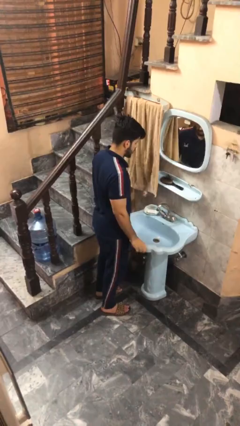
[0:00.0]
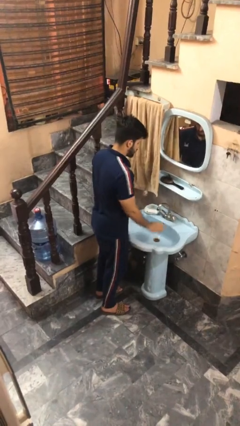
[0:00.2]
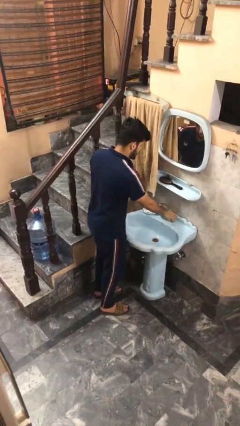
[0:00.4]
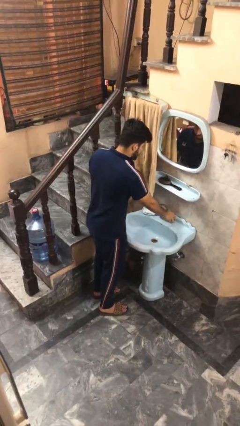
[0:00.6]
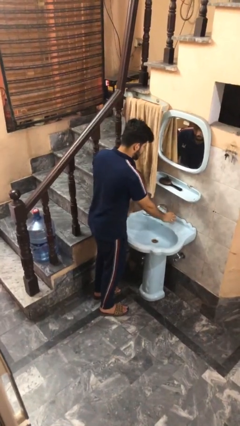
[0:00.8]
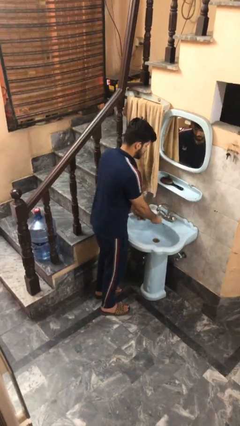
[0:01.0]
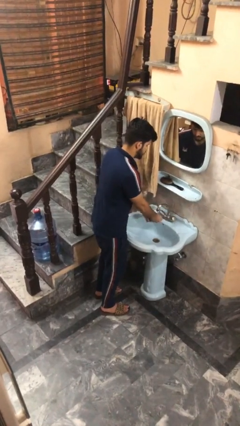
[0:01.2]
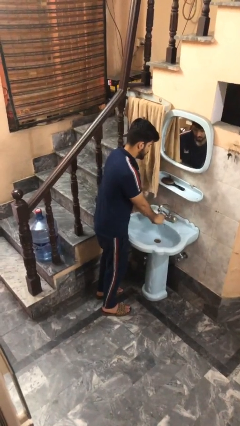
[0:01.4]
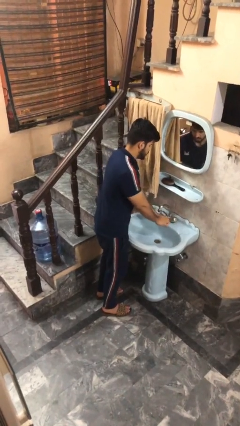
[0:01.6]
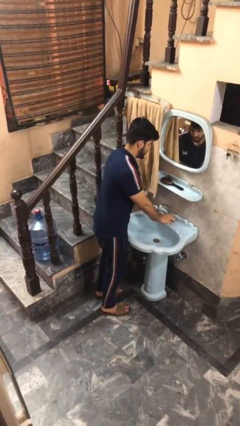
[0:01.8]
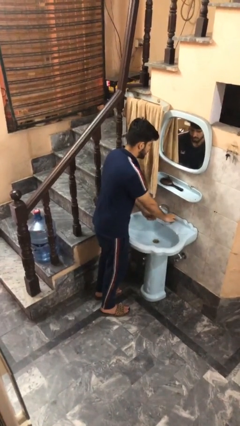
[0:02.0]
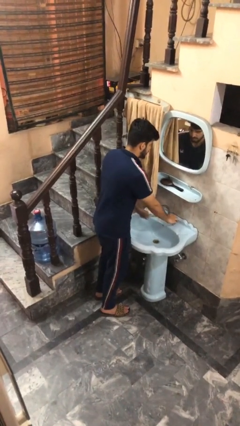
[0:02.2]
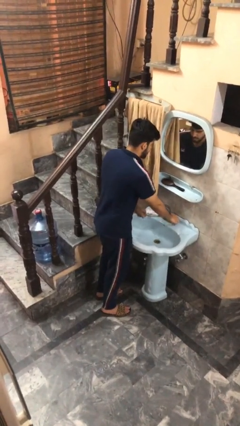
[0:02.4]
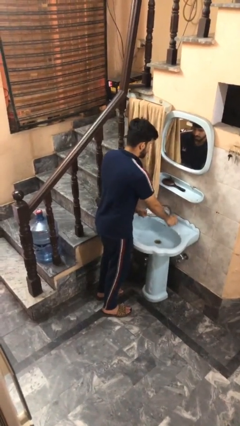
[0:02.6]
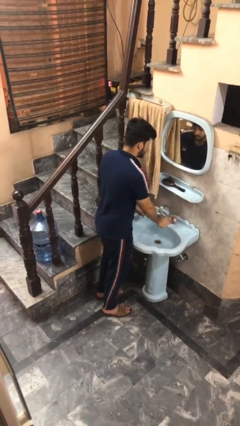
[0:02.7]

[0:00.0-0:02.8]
person washes hands

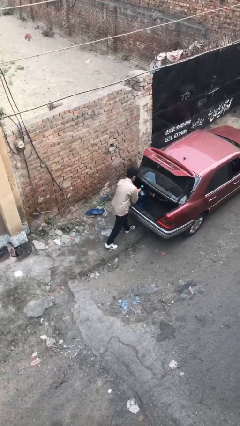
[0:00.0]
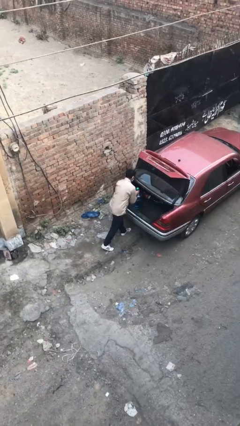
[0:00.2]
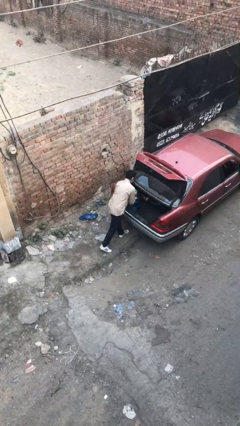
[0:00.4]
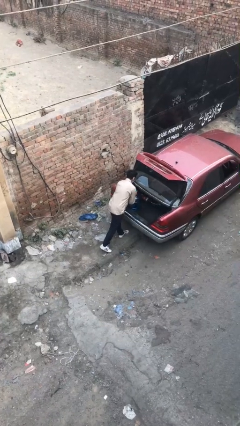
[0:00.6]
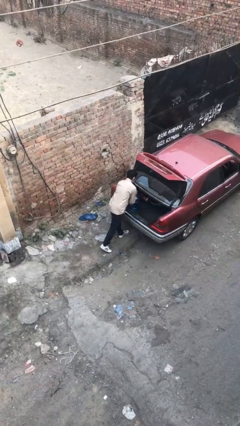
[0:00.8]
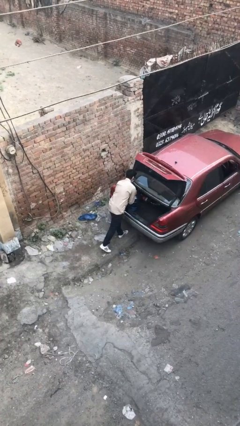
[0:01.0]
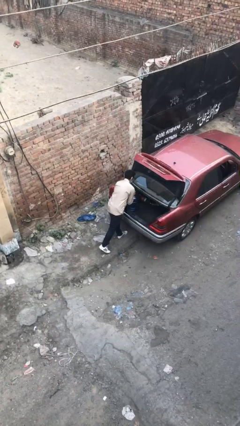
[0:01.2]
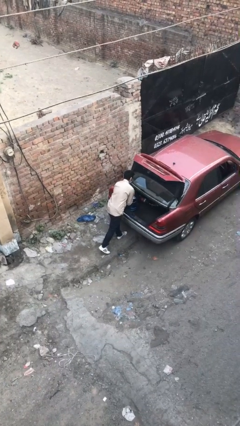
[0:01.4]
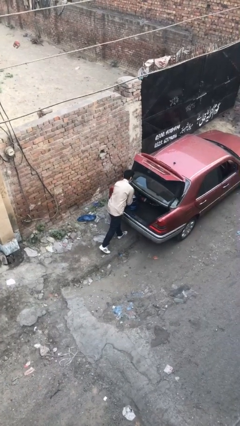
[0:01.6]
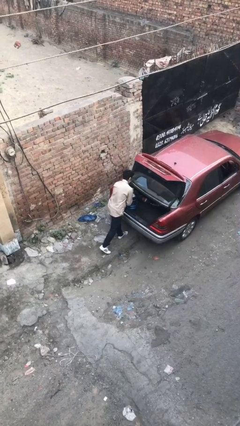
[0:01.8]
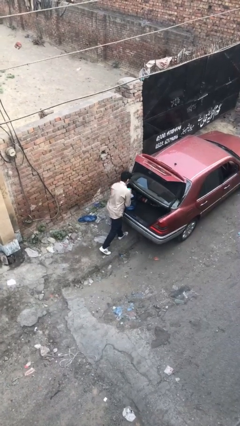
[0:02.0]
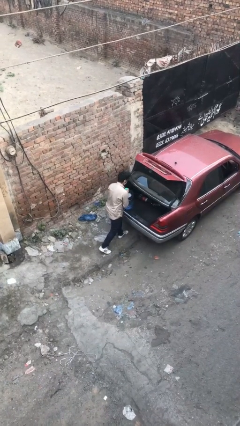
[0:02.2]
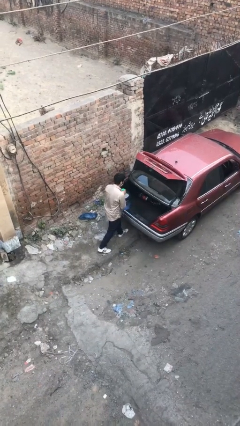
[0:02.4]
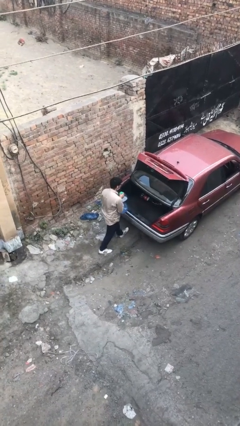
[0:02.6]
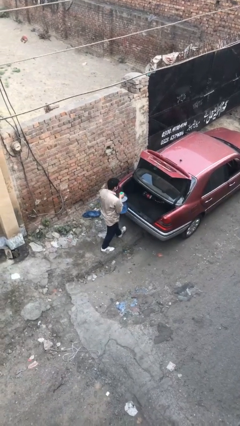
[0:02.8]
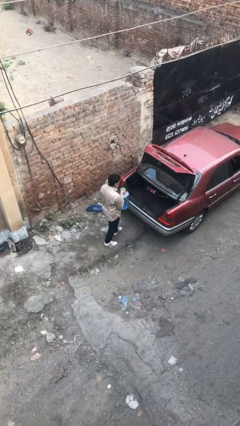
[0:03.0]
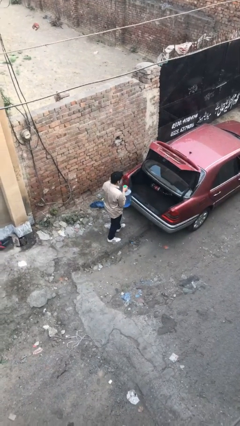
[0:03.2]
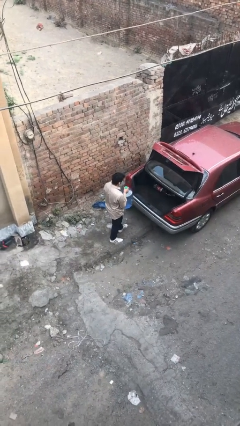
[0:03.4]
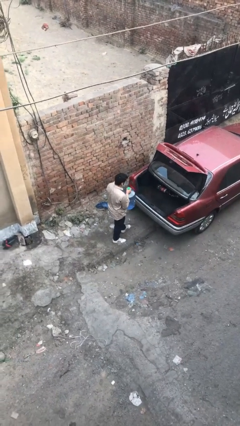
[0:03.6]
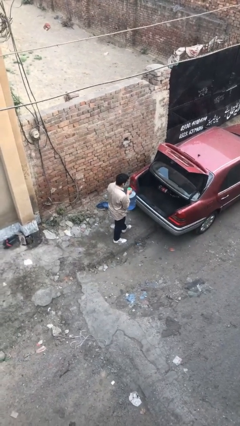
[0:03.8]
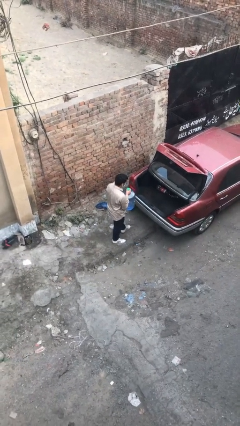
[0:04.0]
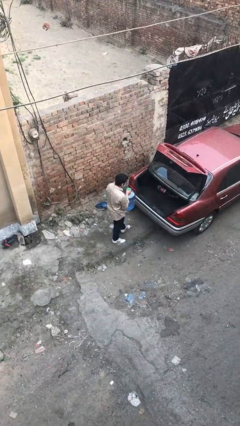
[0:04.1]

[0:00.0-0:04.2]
person unloads car

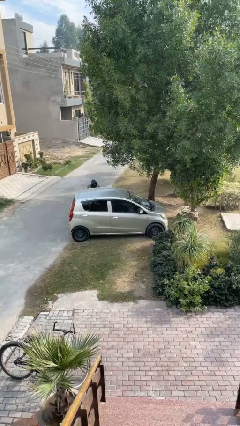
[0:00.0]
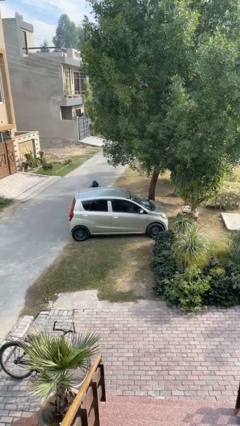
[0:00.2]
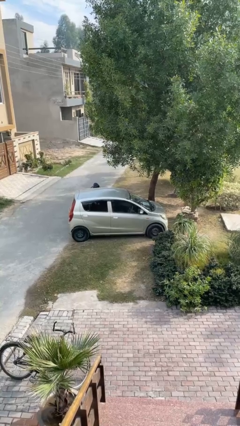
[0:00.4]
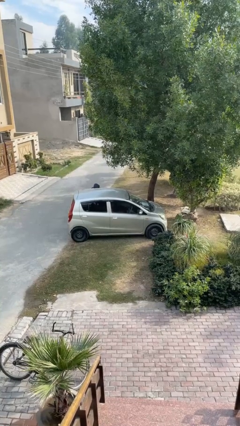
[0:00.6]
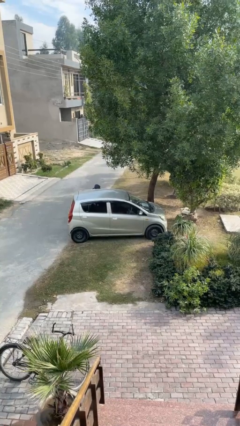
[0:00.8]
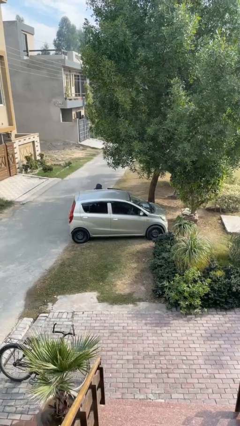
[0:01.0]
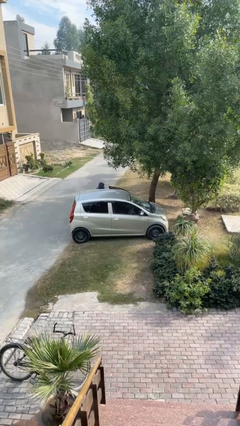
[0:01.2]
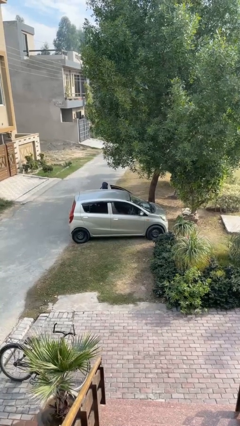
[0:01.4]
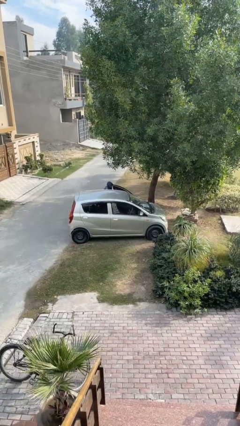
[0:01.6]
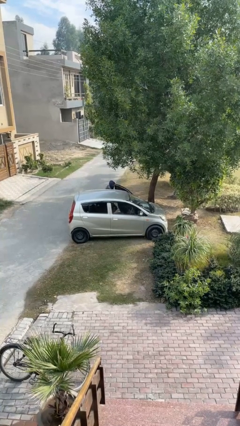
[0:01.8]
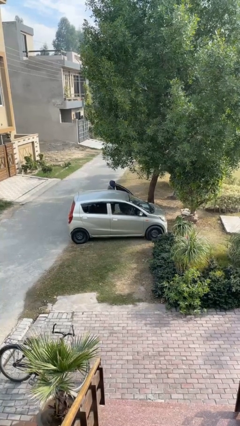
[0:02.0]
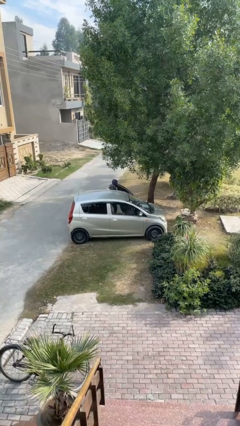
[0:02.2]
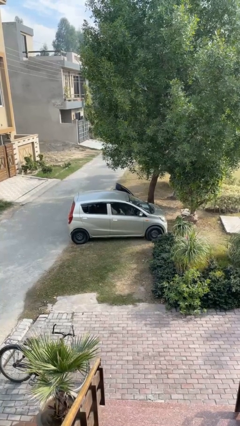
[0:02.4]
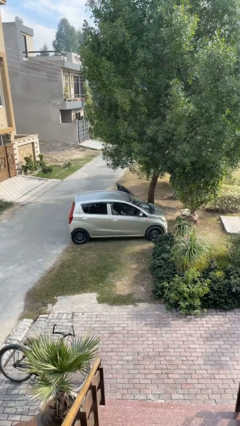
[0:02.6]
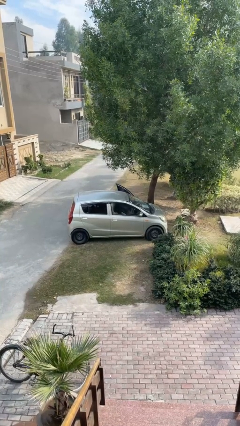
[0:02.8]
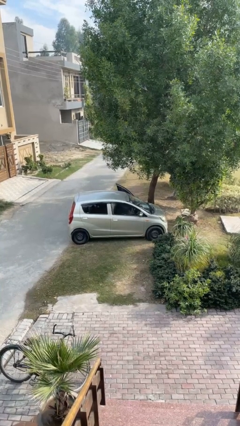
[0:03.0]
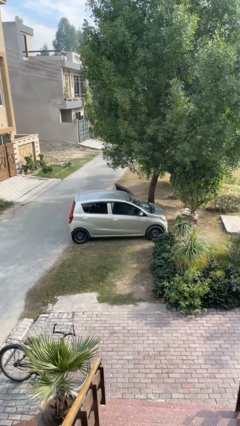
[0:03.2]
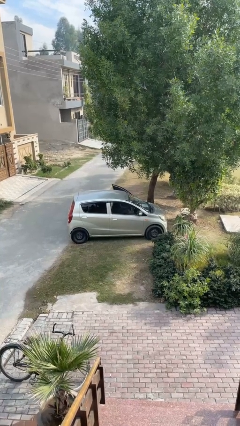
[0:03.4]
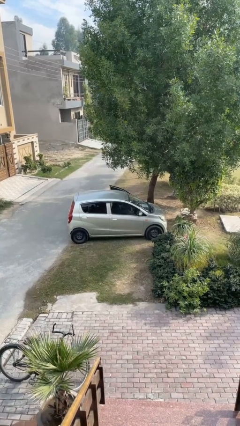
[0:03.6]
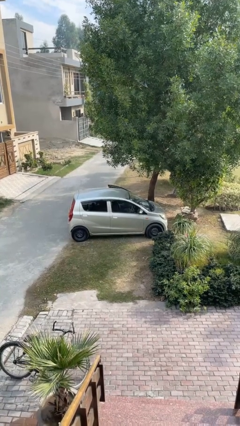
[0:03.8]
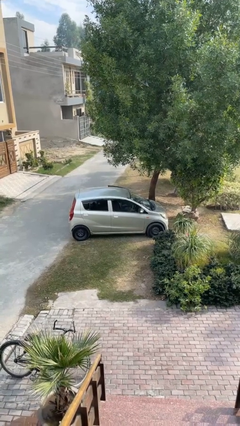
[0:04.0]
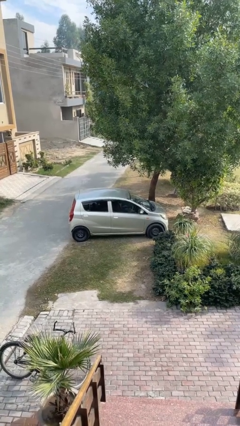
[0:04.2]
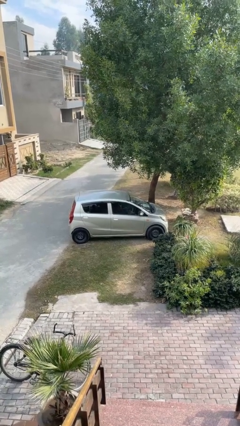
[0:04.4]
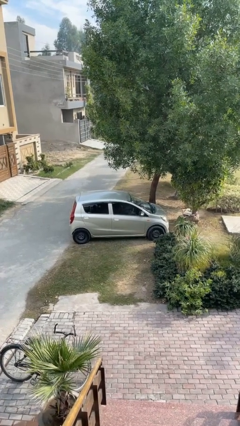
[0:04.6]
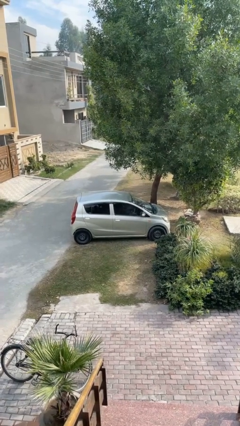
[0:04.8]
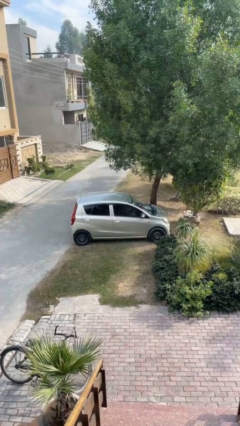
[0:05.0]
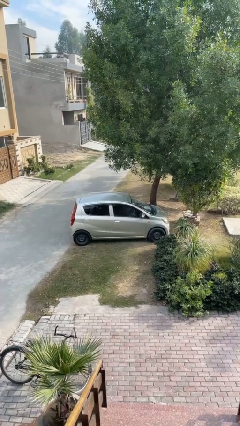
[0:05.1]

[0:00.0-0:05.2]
car picks up person

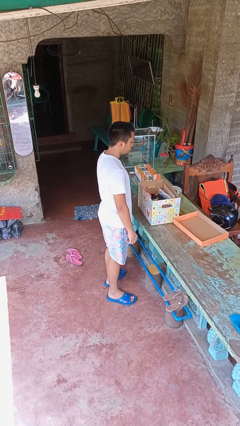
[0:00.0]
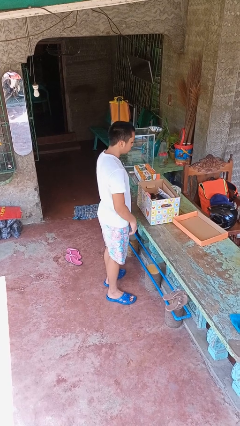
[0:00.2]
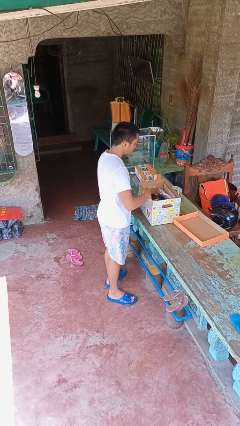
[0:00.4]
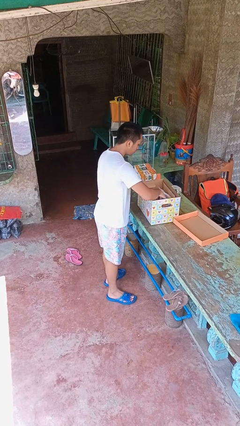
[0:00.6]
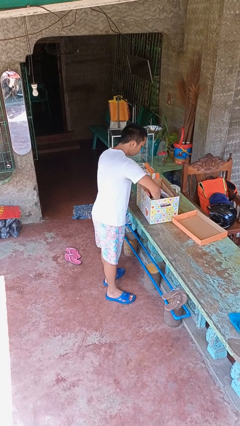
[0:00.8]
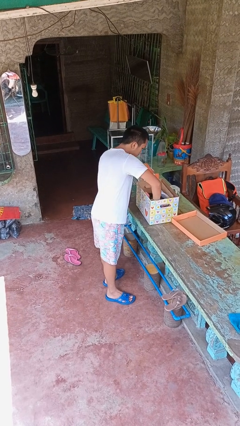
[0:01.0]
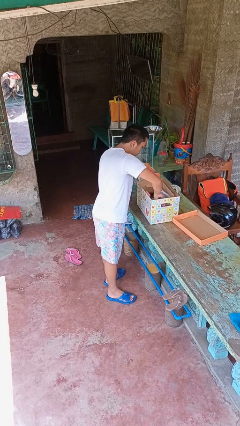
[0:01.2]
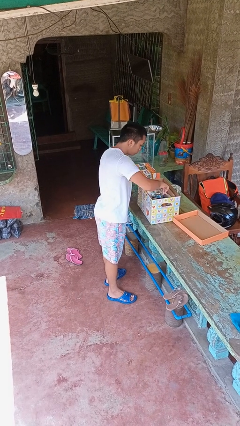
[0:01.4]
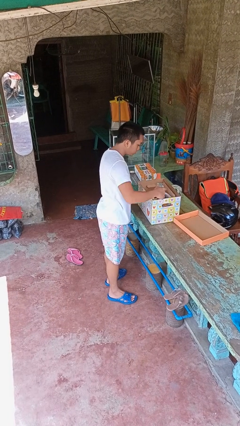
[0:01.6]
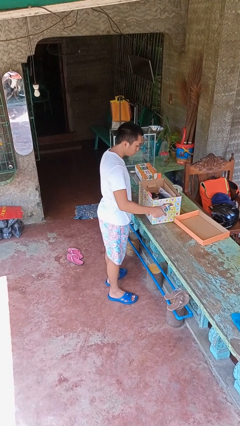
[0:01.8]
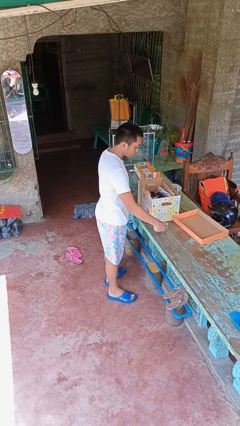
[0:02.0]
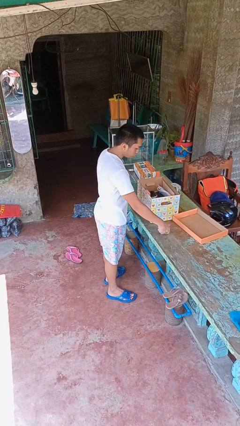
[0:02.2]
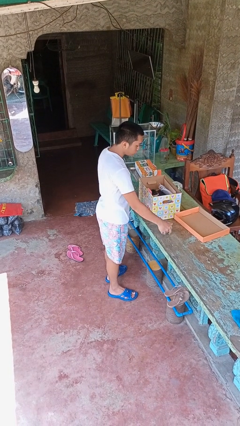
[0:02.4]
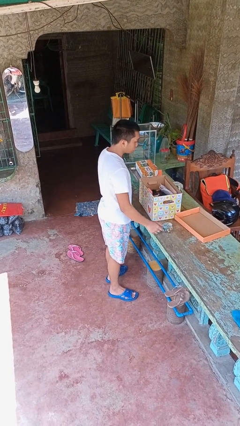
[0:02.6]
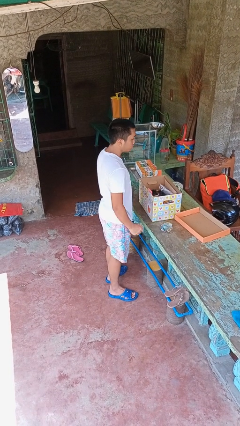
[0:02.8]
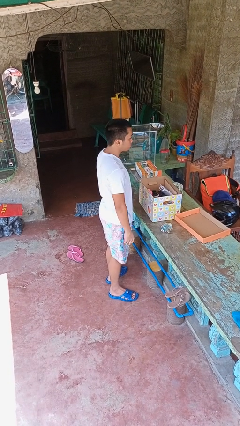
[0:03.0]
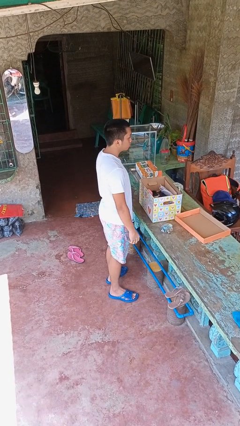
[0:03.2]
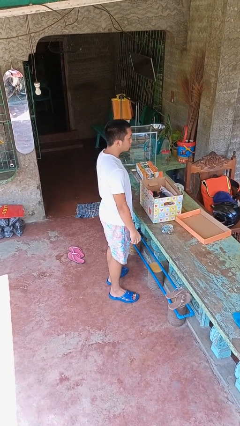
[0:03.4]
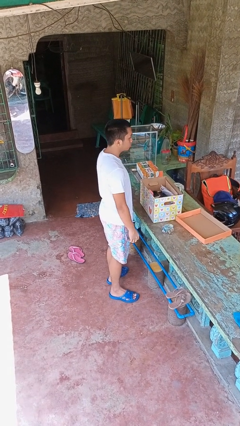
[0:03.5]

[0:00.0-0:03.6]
person takes object from box

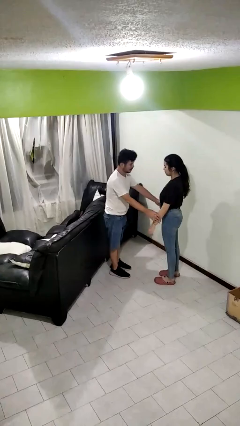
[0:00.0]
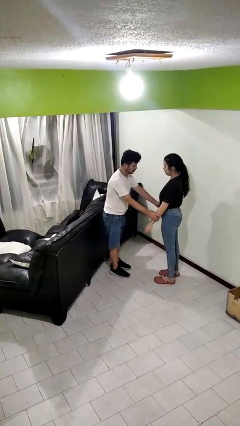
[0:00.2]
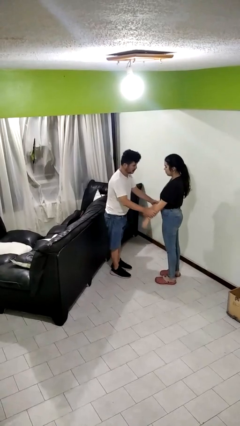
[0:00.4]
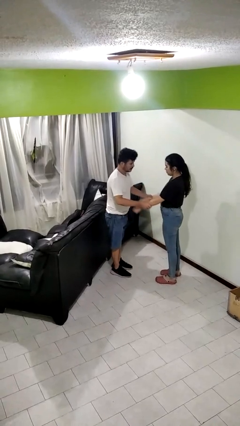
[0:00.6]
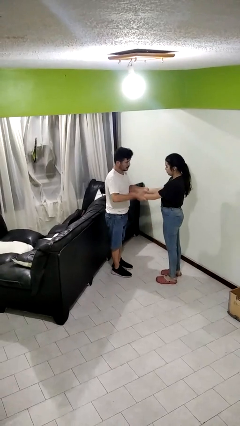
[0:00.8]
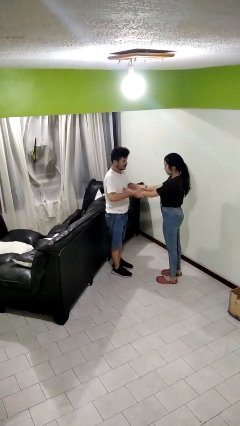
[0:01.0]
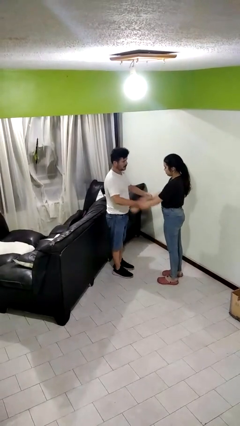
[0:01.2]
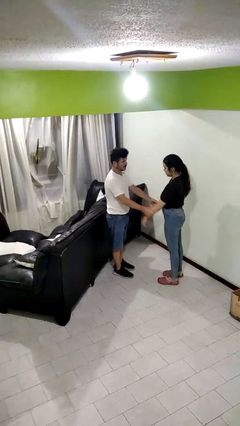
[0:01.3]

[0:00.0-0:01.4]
person grabs person by forearm

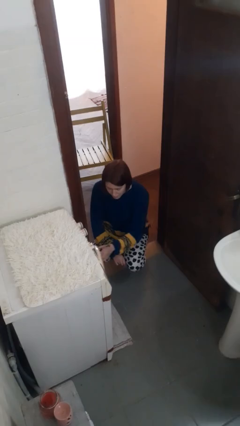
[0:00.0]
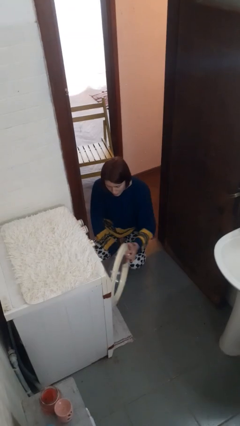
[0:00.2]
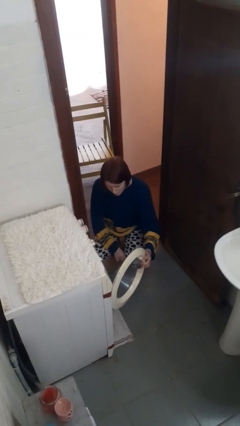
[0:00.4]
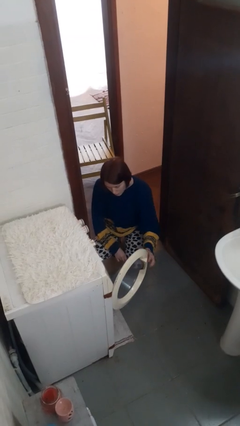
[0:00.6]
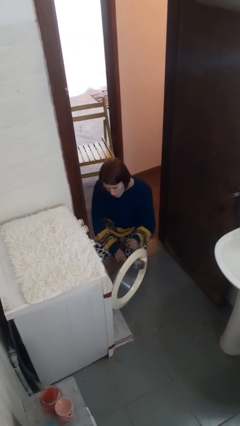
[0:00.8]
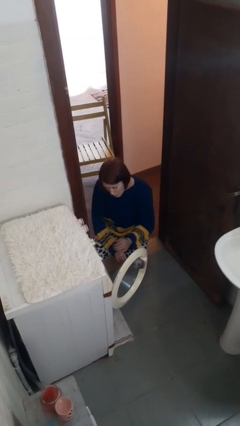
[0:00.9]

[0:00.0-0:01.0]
person opens clothes washer
